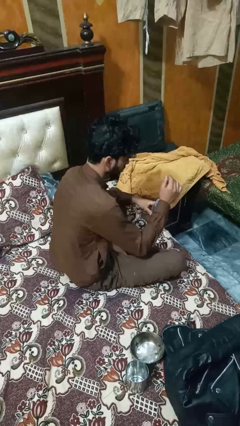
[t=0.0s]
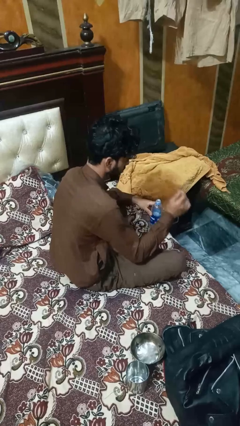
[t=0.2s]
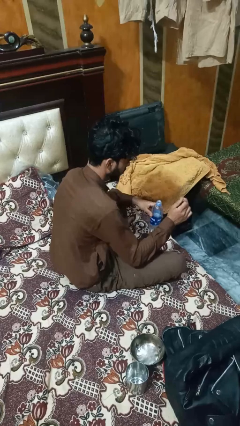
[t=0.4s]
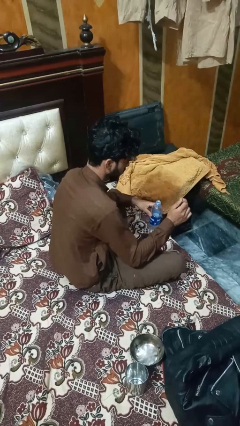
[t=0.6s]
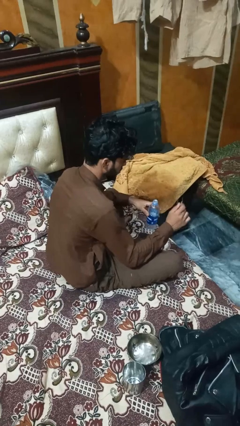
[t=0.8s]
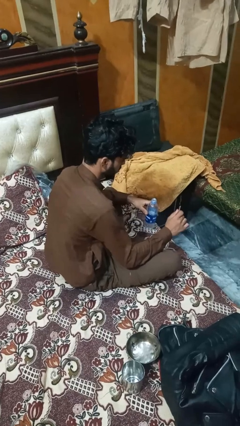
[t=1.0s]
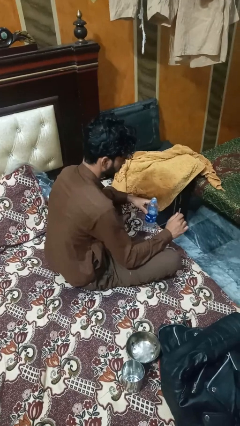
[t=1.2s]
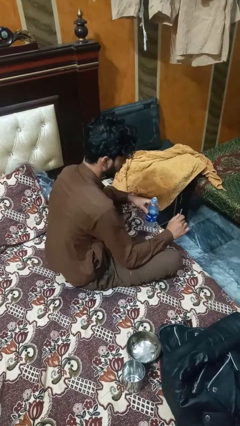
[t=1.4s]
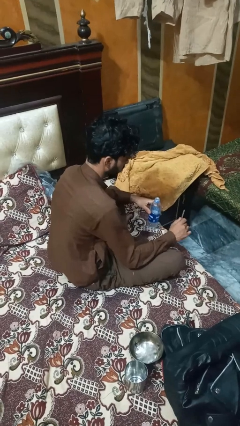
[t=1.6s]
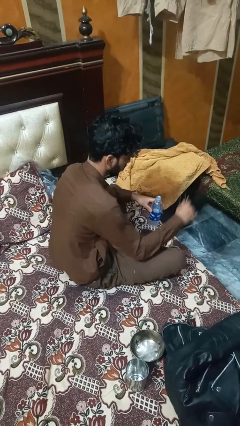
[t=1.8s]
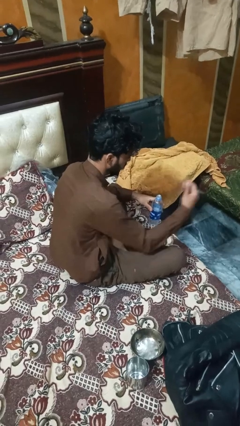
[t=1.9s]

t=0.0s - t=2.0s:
person unscrews lid from bottle

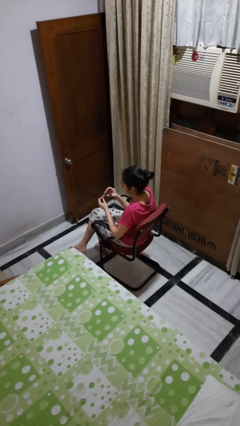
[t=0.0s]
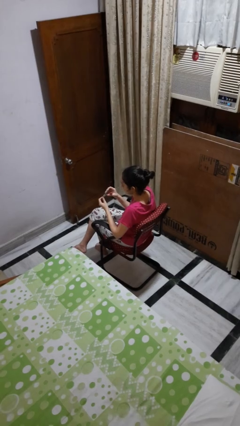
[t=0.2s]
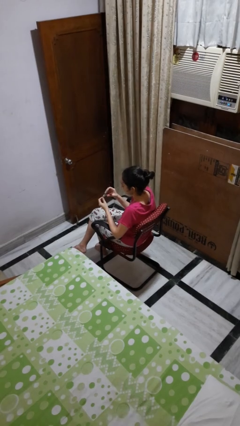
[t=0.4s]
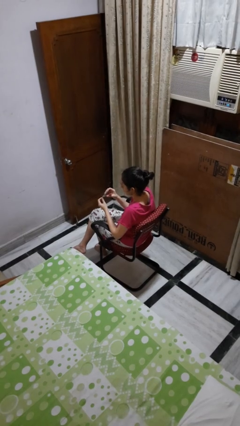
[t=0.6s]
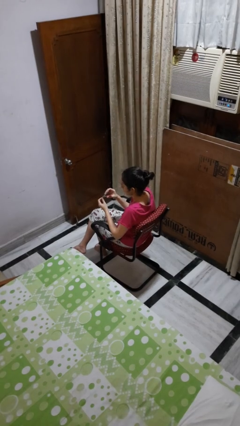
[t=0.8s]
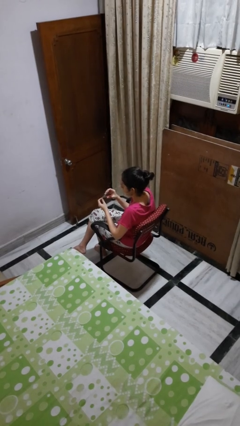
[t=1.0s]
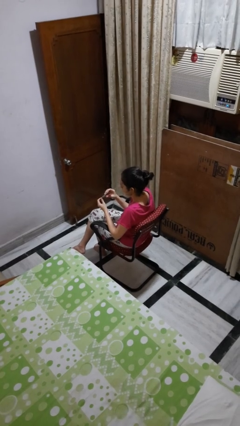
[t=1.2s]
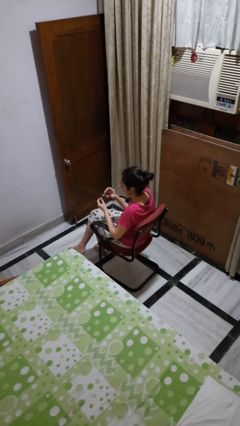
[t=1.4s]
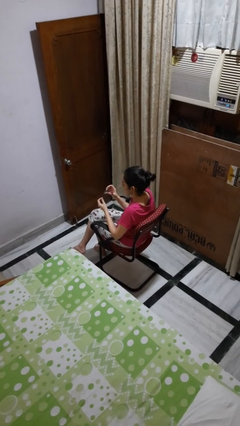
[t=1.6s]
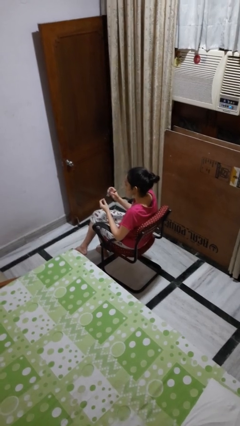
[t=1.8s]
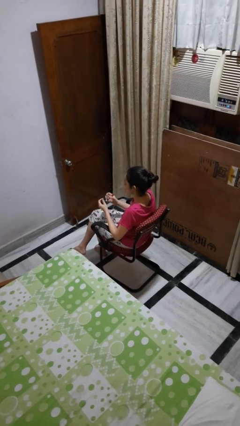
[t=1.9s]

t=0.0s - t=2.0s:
person clips fingernails

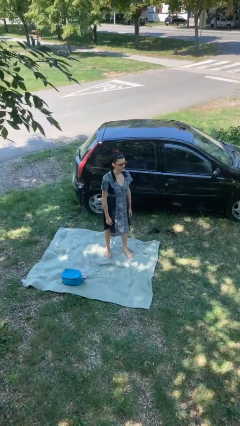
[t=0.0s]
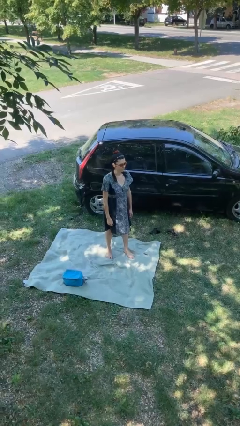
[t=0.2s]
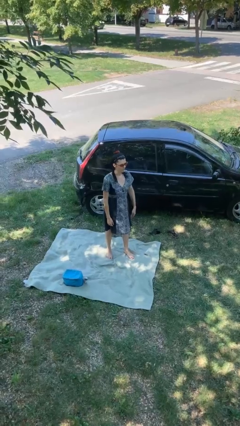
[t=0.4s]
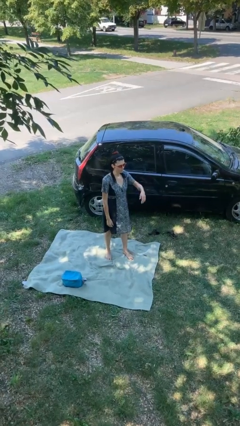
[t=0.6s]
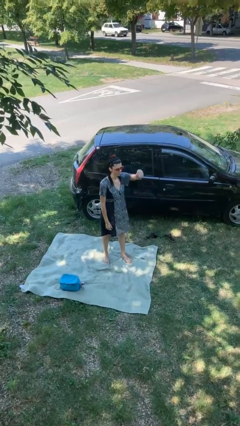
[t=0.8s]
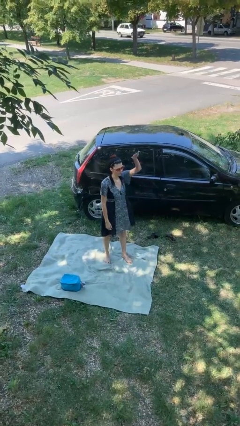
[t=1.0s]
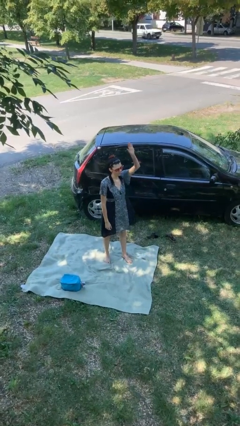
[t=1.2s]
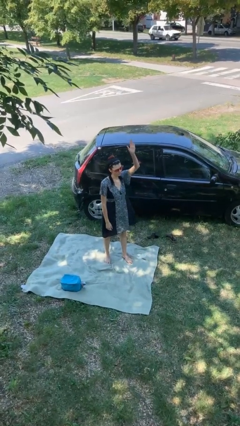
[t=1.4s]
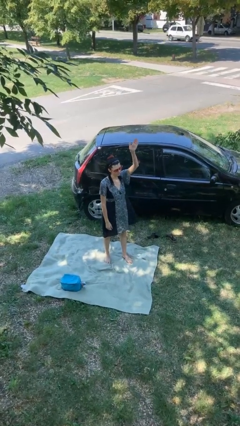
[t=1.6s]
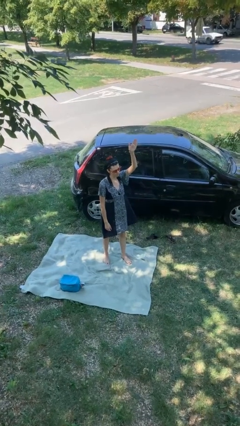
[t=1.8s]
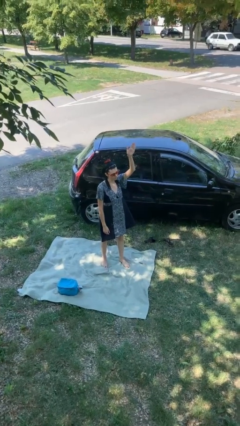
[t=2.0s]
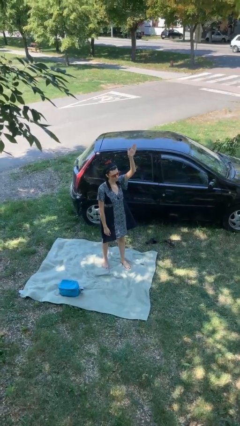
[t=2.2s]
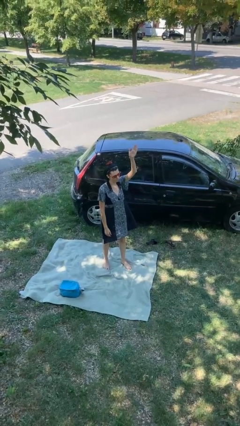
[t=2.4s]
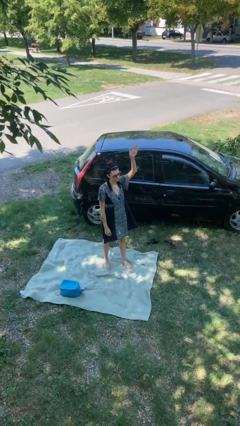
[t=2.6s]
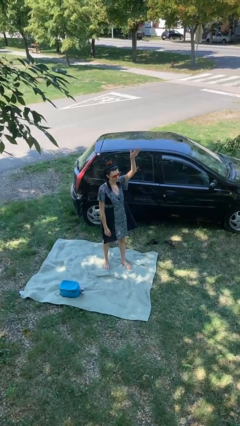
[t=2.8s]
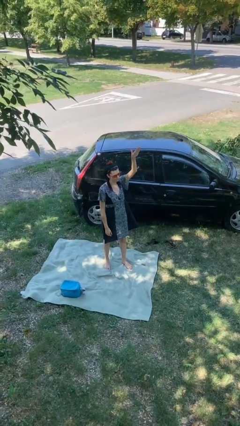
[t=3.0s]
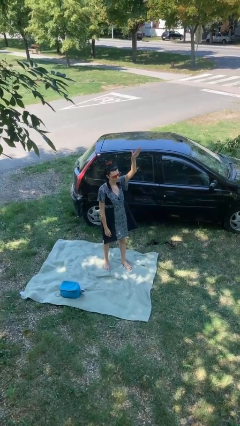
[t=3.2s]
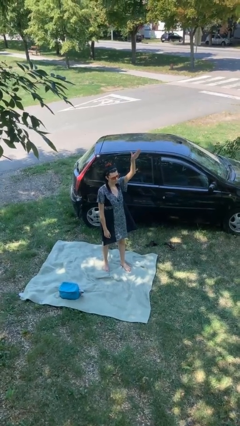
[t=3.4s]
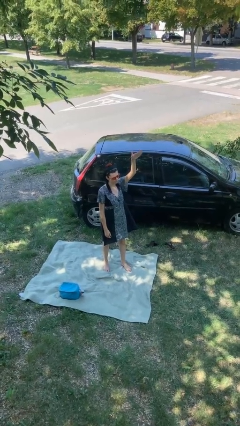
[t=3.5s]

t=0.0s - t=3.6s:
person gestures raise hand

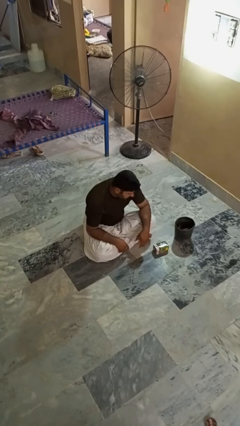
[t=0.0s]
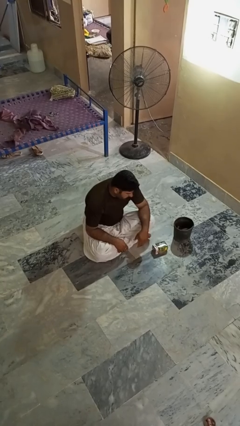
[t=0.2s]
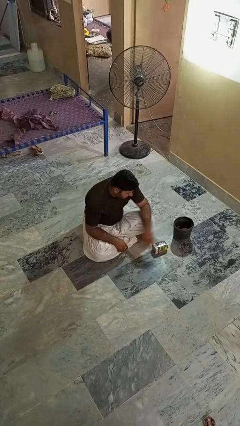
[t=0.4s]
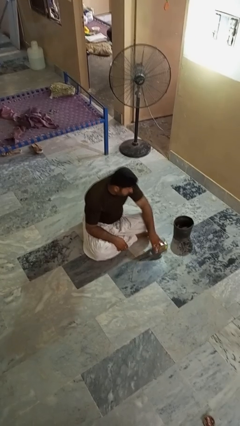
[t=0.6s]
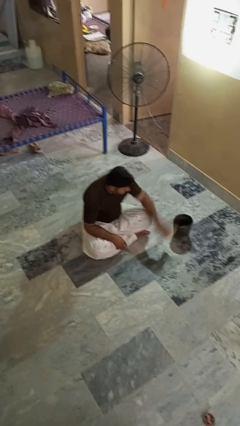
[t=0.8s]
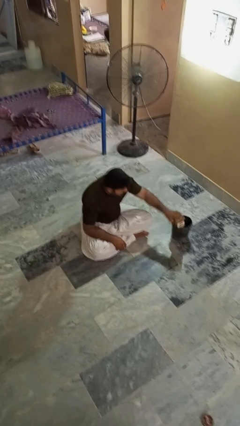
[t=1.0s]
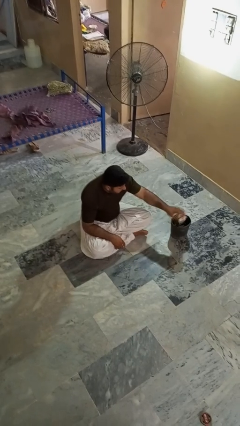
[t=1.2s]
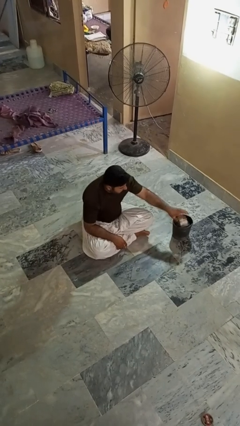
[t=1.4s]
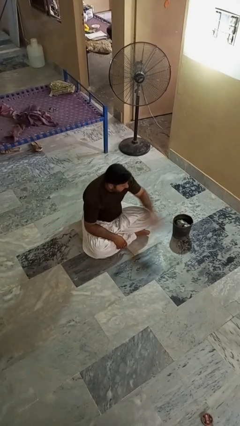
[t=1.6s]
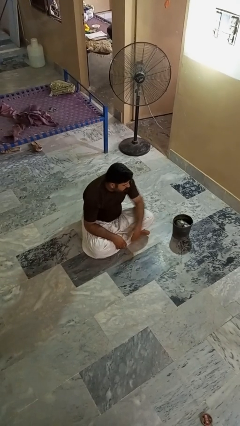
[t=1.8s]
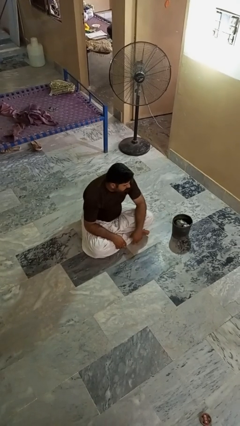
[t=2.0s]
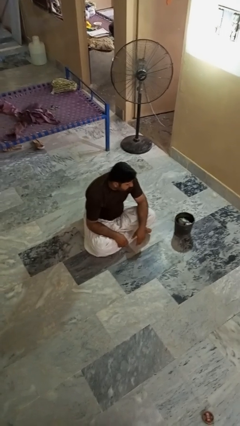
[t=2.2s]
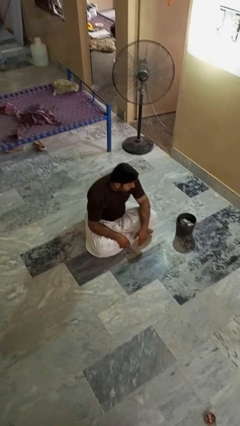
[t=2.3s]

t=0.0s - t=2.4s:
person puts object into basket

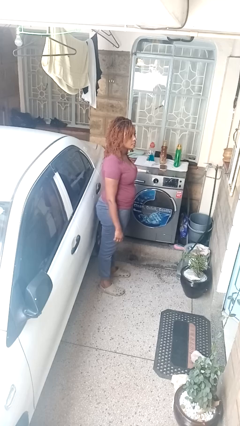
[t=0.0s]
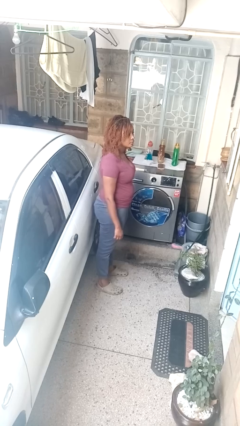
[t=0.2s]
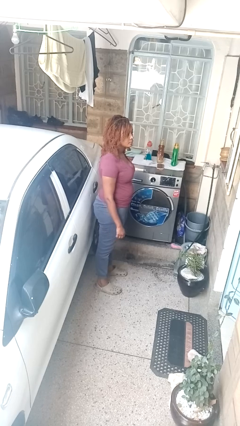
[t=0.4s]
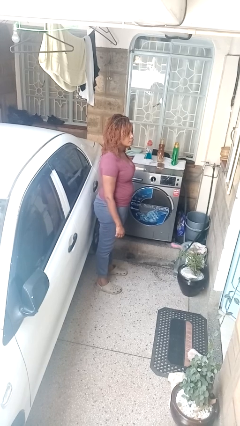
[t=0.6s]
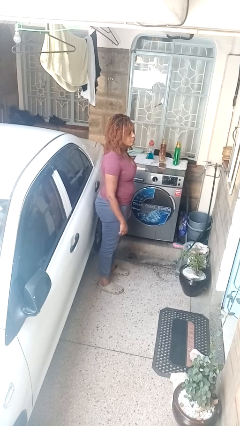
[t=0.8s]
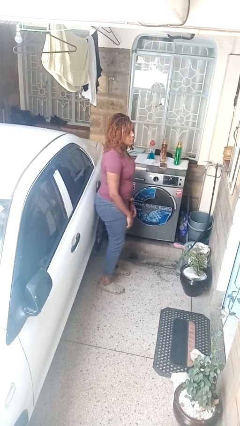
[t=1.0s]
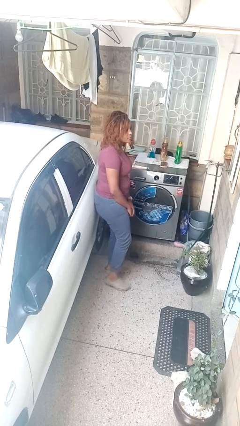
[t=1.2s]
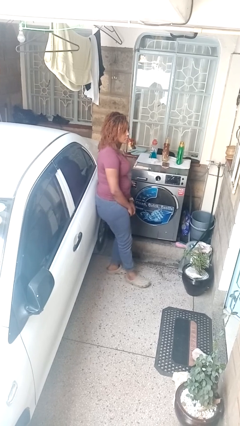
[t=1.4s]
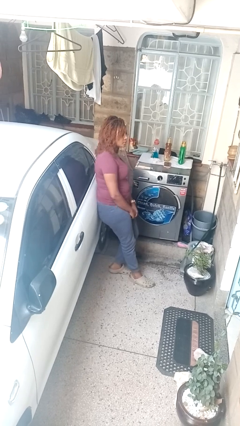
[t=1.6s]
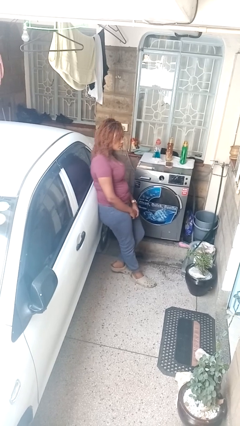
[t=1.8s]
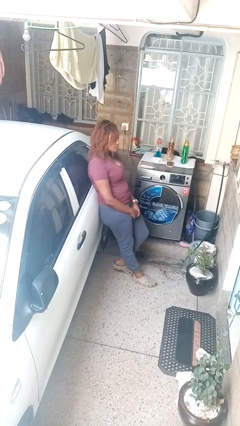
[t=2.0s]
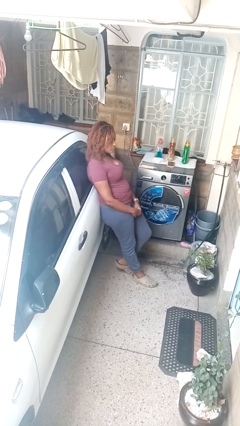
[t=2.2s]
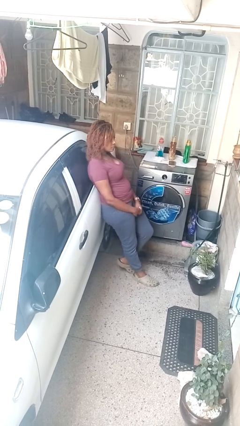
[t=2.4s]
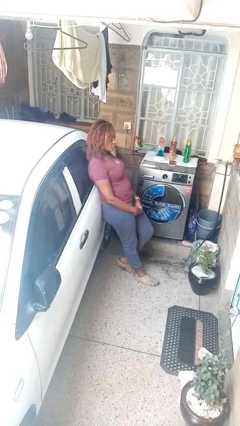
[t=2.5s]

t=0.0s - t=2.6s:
person leans against car

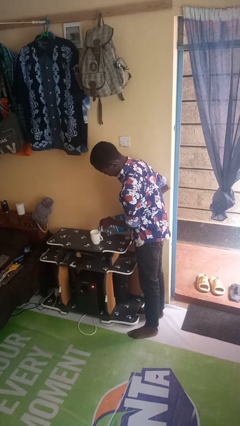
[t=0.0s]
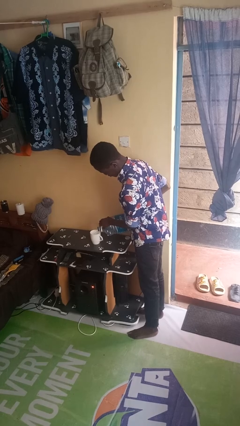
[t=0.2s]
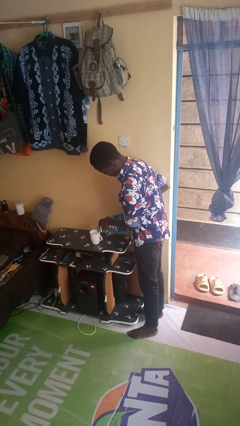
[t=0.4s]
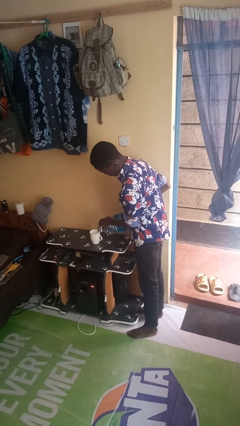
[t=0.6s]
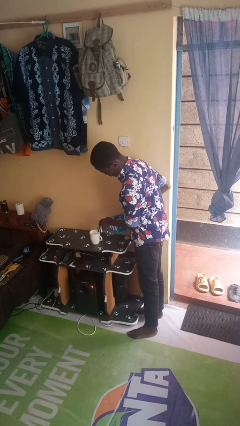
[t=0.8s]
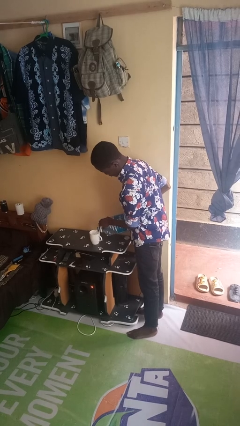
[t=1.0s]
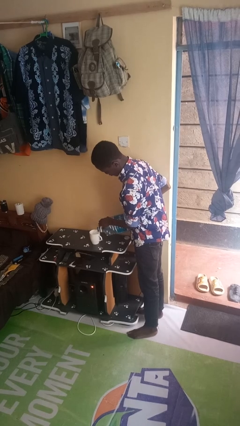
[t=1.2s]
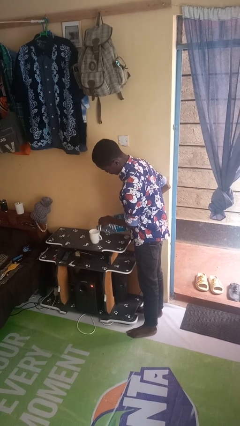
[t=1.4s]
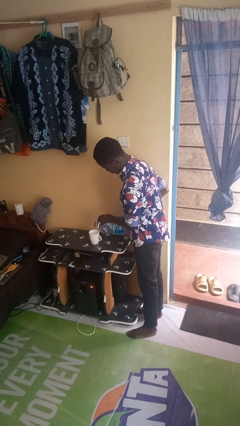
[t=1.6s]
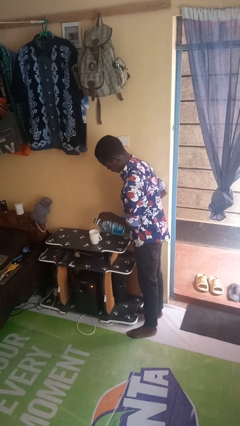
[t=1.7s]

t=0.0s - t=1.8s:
person pours liquid into cup

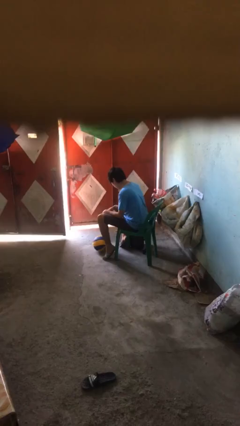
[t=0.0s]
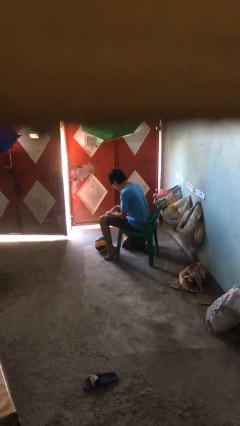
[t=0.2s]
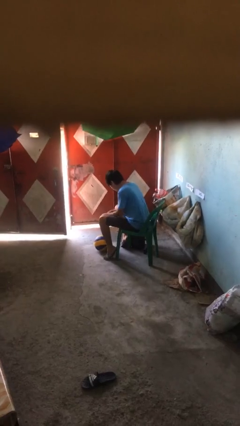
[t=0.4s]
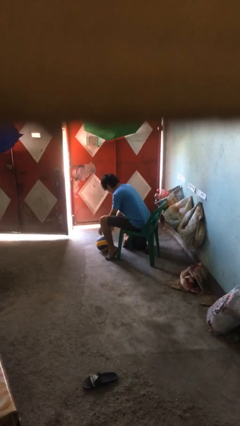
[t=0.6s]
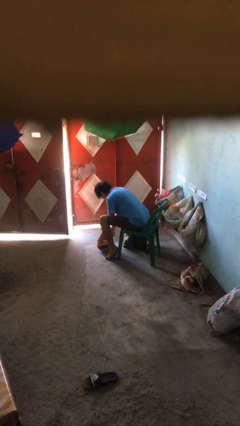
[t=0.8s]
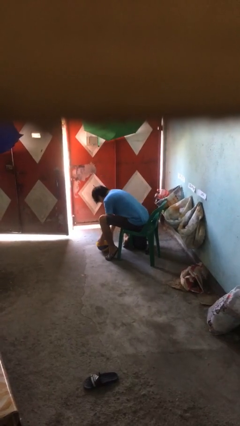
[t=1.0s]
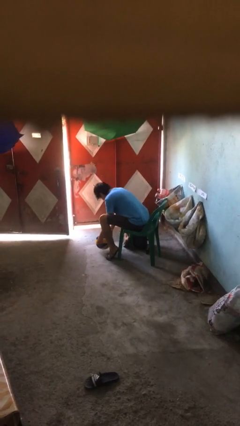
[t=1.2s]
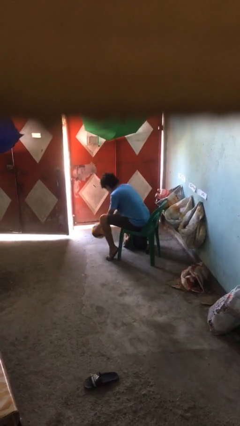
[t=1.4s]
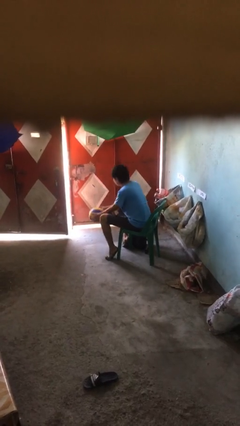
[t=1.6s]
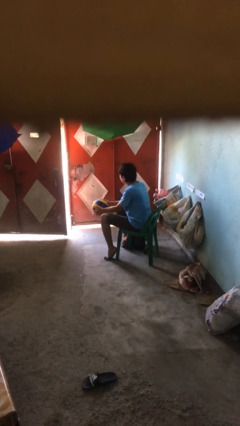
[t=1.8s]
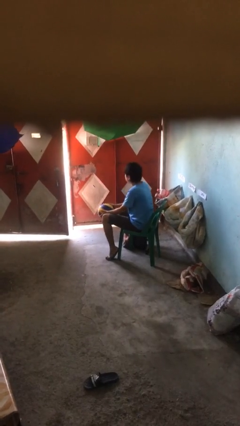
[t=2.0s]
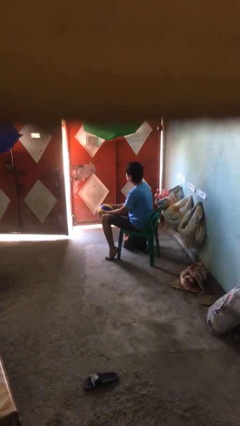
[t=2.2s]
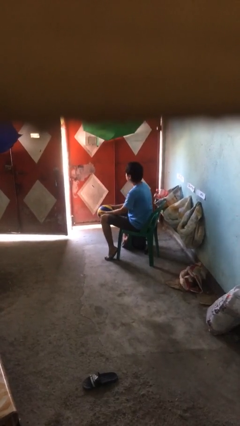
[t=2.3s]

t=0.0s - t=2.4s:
person picks up object from floor

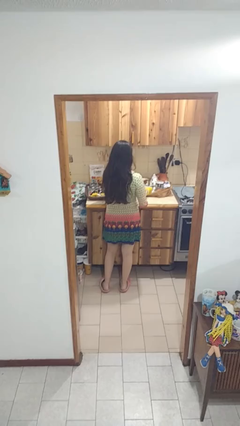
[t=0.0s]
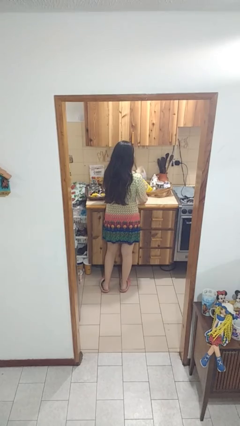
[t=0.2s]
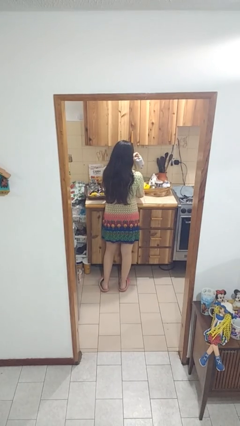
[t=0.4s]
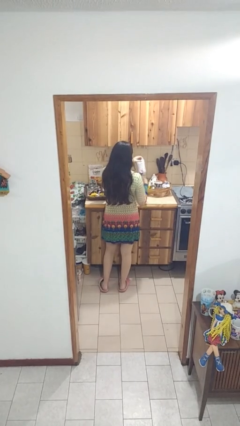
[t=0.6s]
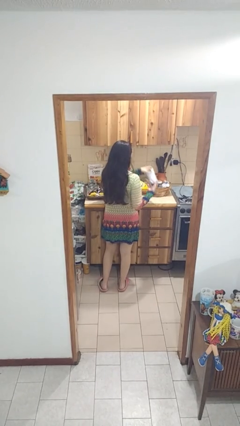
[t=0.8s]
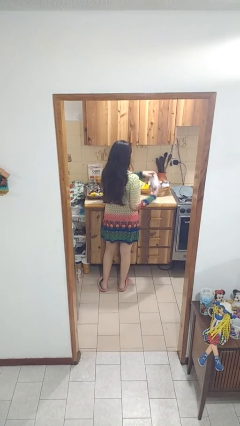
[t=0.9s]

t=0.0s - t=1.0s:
person takes object from bag
